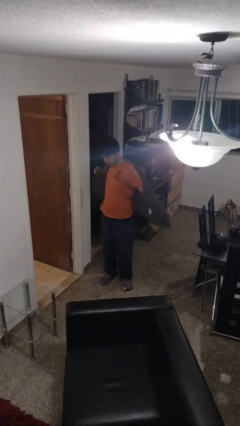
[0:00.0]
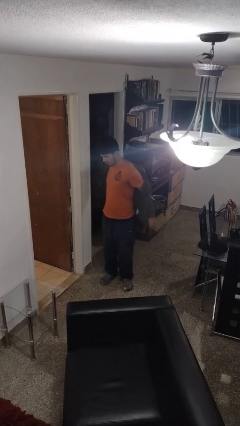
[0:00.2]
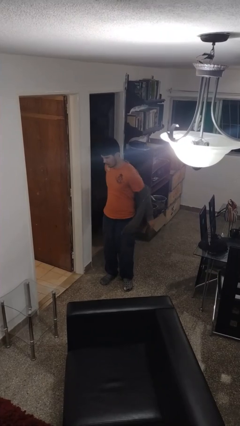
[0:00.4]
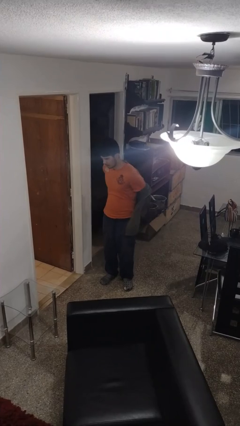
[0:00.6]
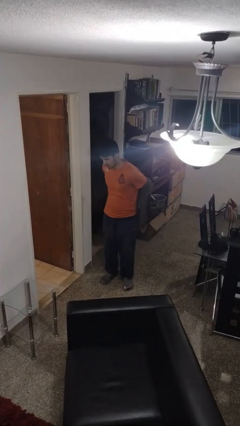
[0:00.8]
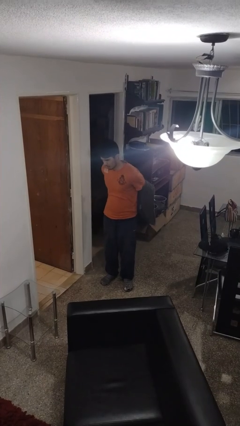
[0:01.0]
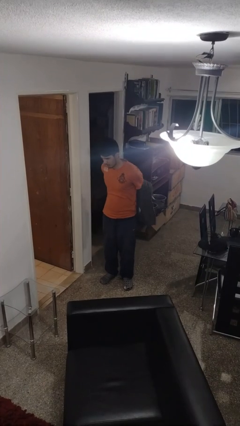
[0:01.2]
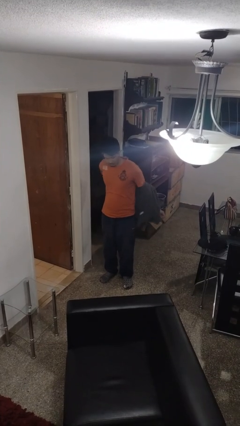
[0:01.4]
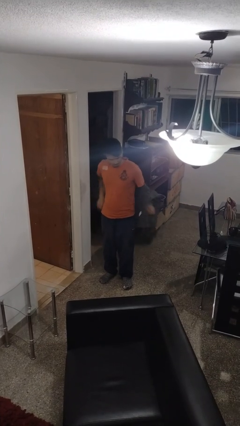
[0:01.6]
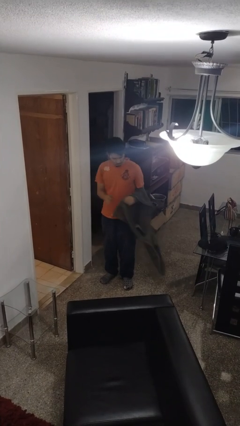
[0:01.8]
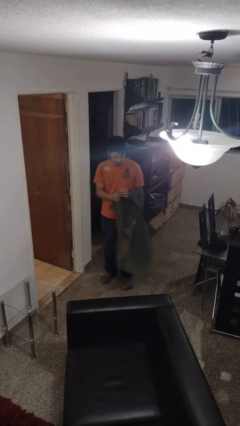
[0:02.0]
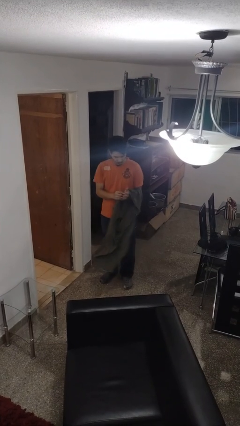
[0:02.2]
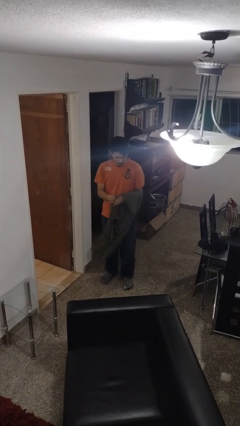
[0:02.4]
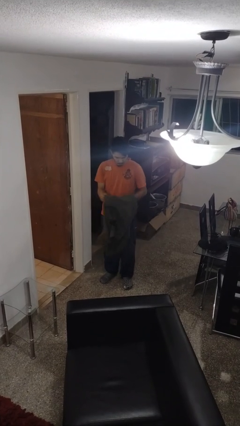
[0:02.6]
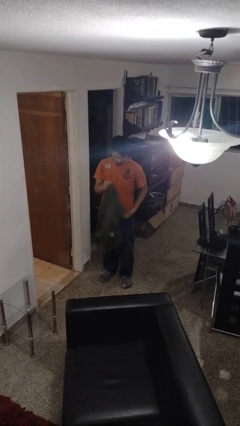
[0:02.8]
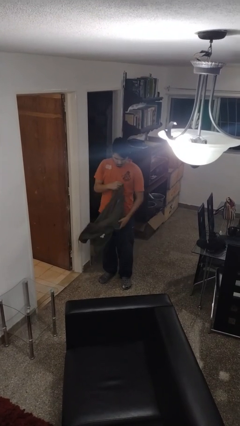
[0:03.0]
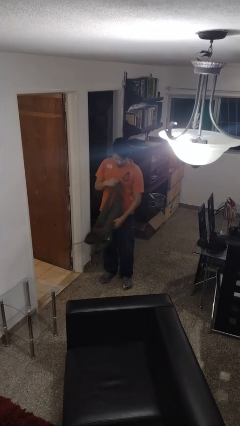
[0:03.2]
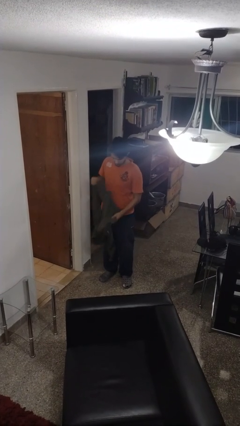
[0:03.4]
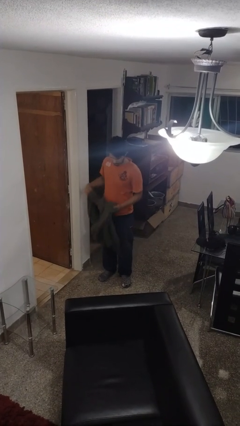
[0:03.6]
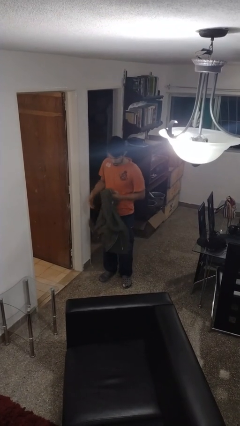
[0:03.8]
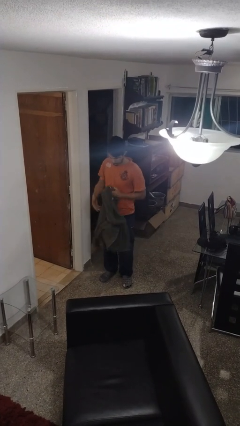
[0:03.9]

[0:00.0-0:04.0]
person takes off jacket

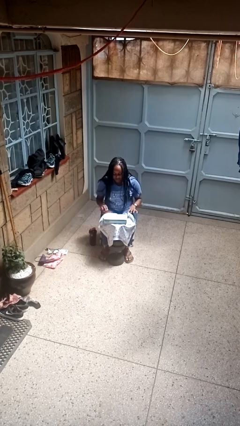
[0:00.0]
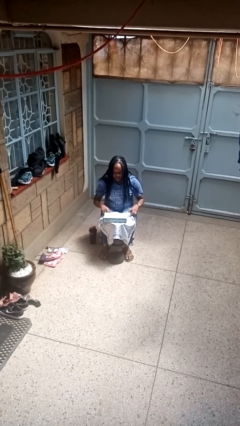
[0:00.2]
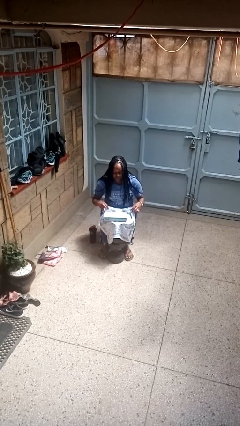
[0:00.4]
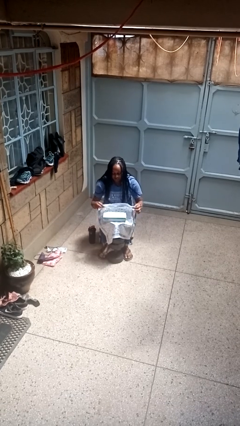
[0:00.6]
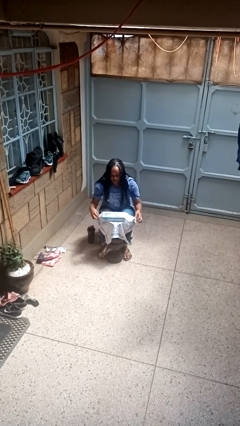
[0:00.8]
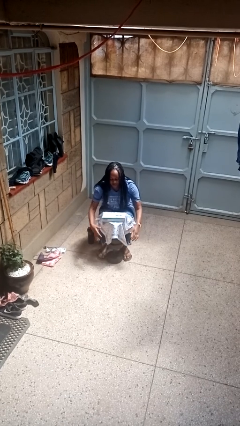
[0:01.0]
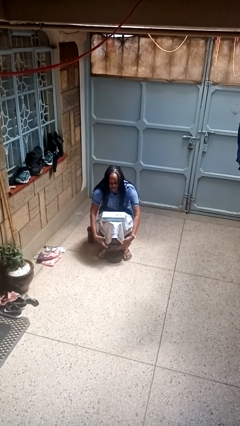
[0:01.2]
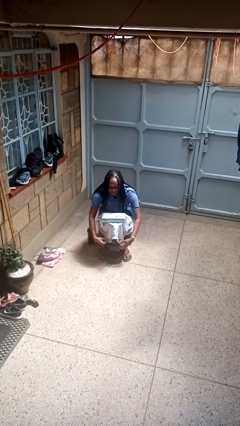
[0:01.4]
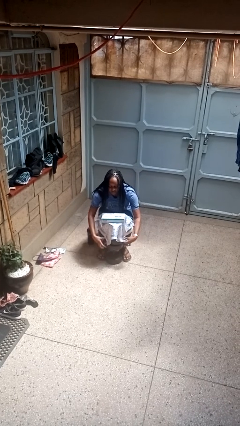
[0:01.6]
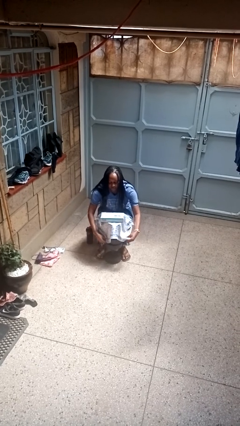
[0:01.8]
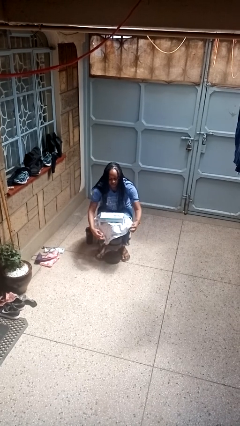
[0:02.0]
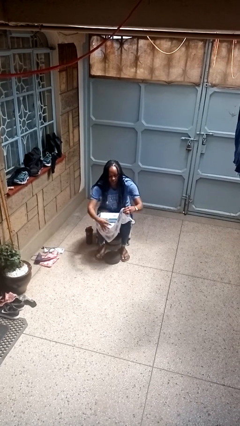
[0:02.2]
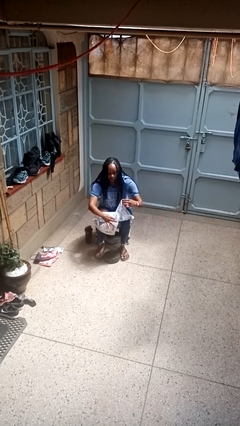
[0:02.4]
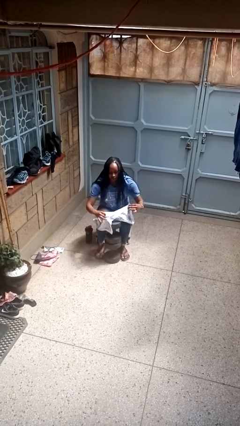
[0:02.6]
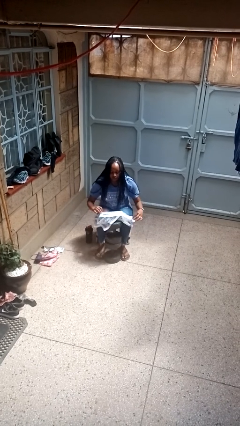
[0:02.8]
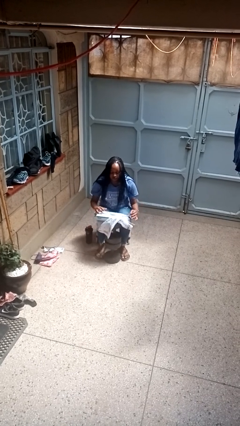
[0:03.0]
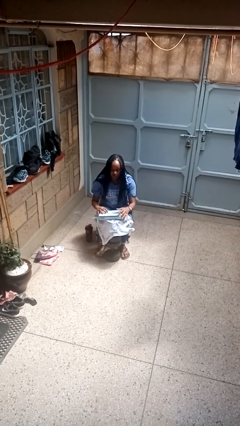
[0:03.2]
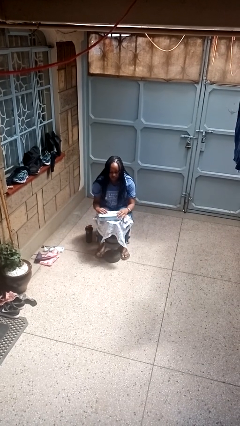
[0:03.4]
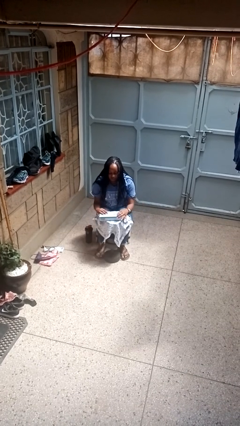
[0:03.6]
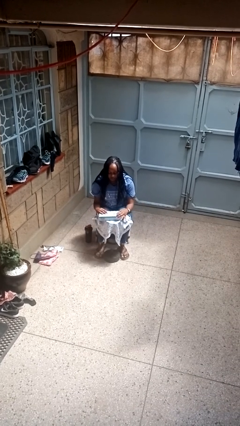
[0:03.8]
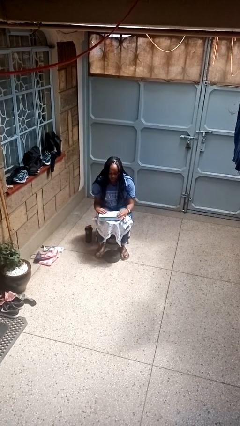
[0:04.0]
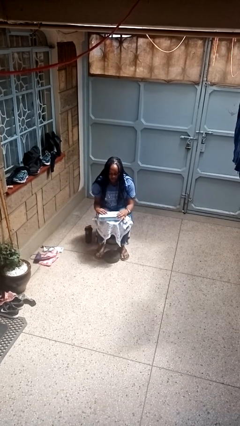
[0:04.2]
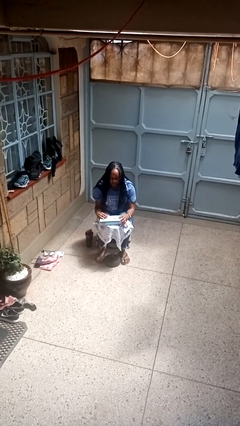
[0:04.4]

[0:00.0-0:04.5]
person wraps box

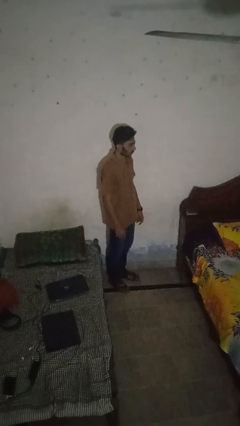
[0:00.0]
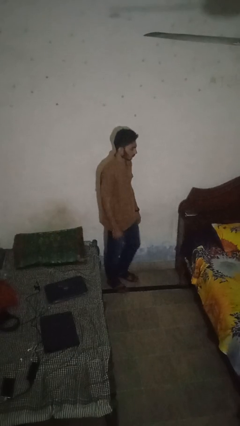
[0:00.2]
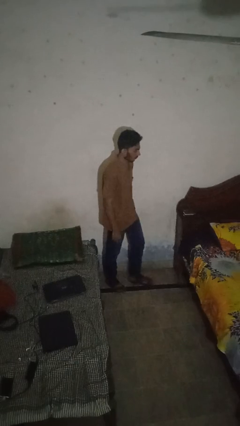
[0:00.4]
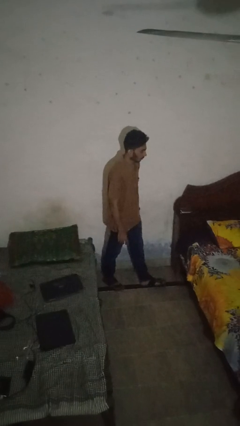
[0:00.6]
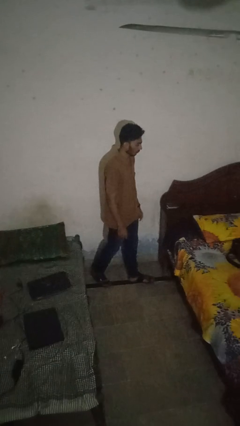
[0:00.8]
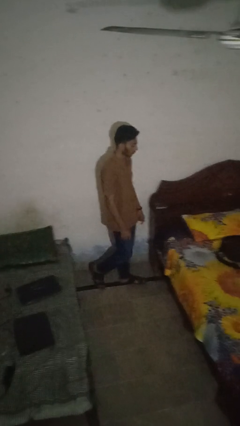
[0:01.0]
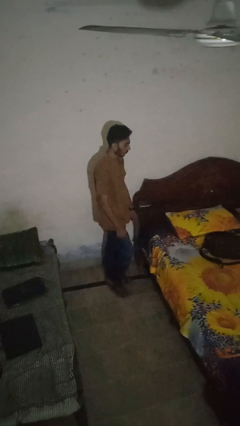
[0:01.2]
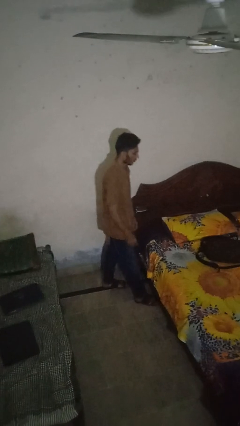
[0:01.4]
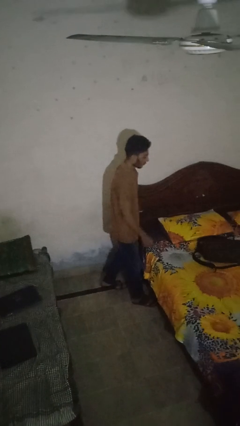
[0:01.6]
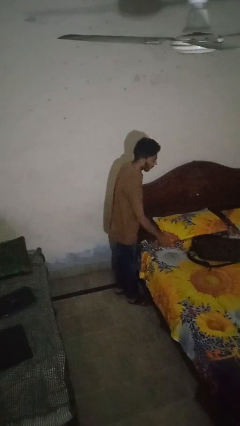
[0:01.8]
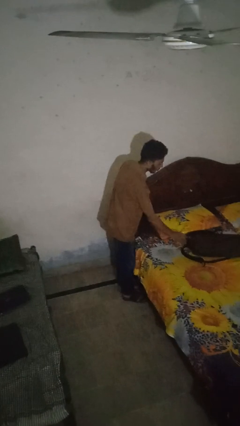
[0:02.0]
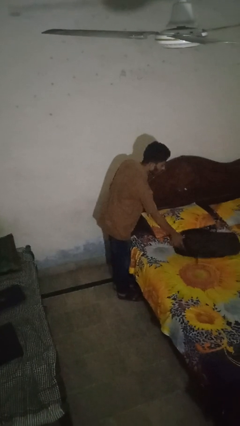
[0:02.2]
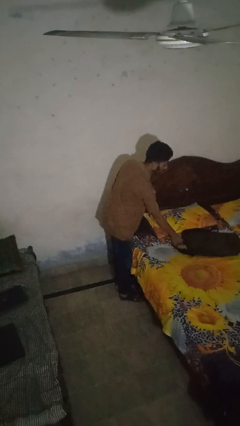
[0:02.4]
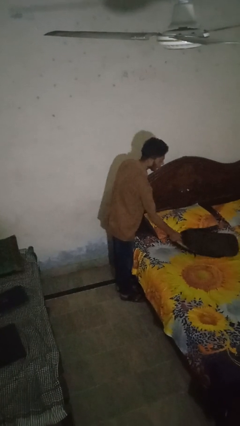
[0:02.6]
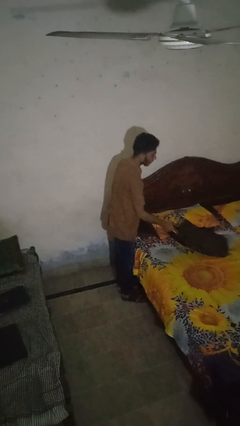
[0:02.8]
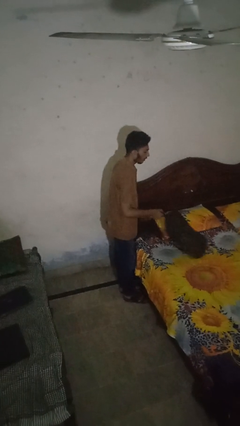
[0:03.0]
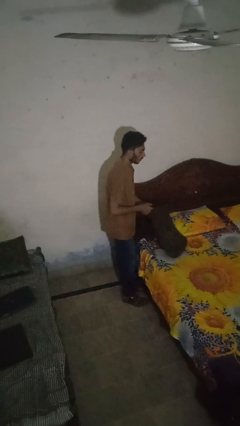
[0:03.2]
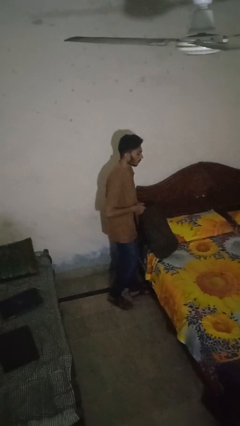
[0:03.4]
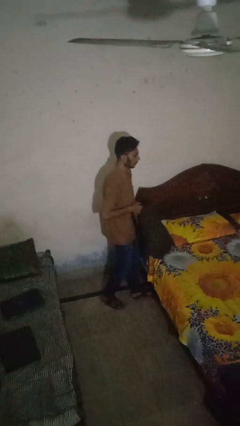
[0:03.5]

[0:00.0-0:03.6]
person picks up object from bed

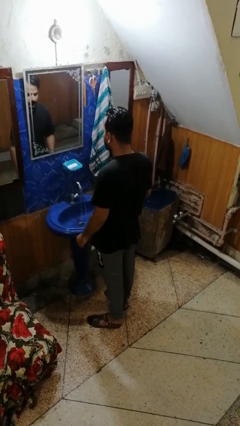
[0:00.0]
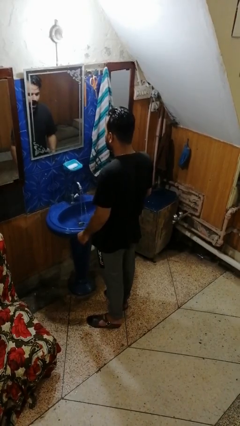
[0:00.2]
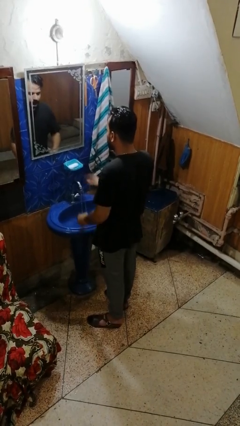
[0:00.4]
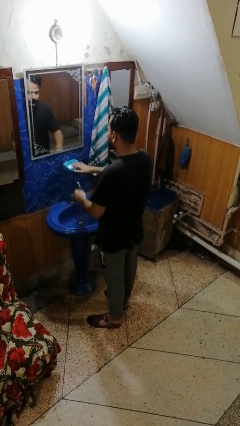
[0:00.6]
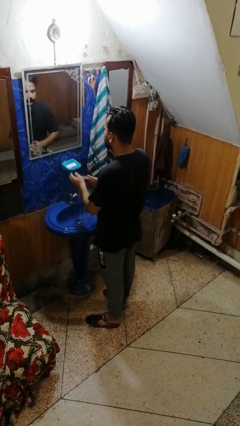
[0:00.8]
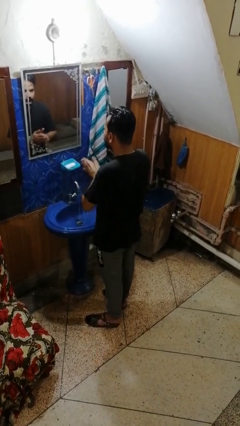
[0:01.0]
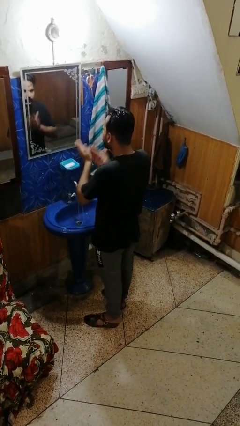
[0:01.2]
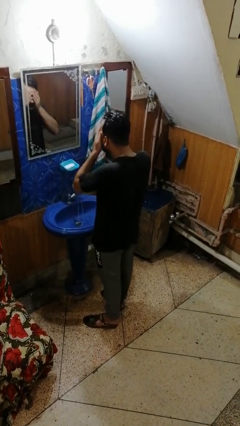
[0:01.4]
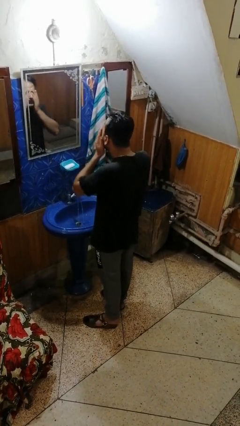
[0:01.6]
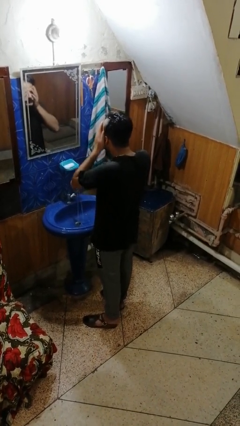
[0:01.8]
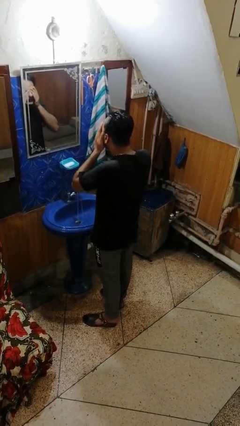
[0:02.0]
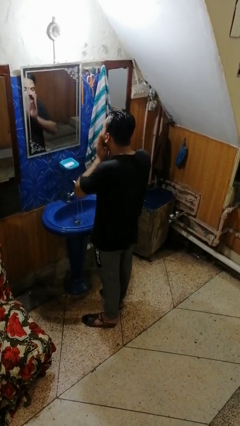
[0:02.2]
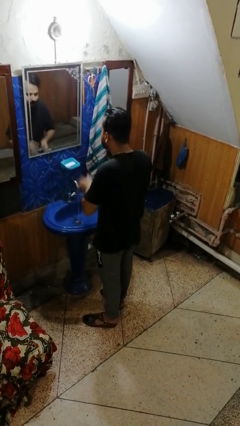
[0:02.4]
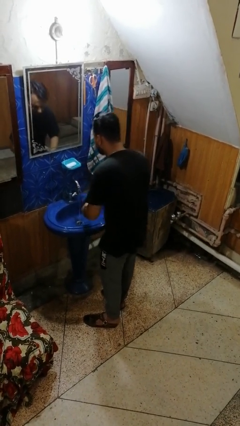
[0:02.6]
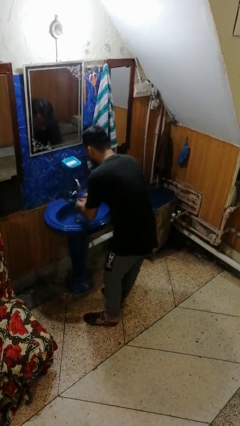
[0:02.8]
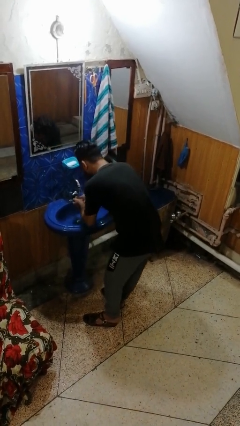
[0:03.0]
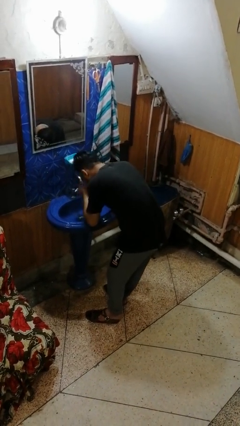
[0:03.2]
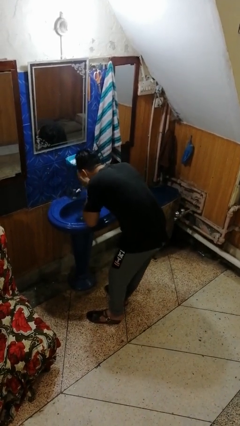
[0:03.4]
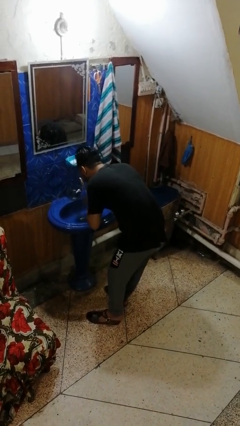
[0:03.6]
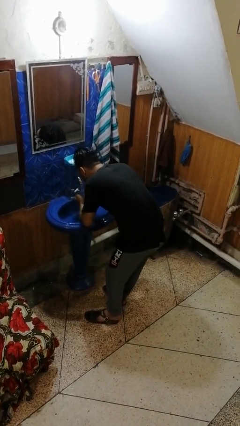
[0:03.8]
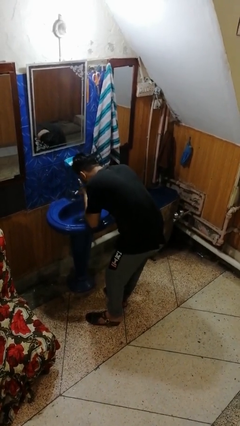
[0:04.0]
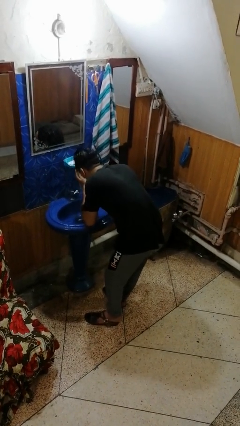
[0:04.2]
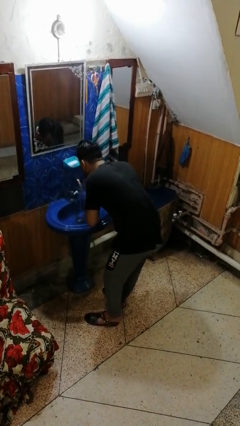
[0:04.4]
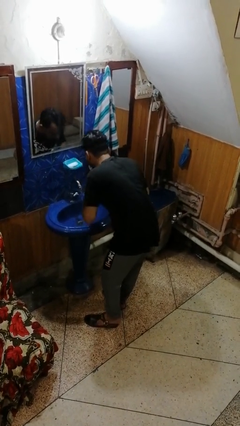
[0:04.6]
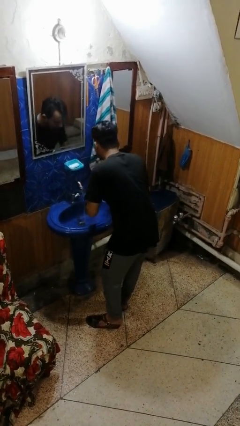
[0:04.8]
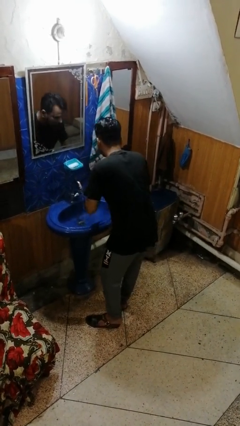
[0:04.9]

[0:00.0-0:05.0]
person washes face

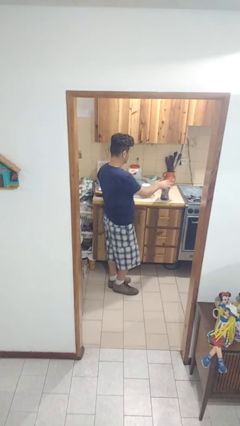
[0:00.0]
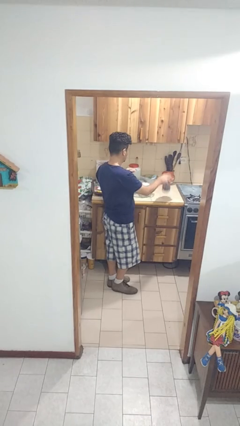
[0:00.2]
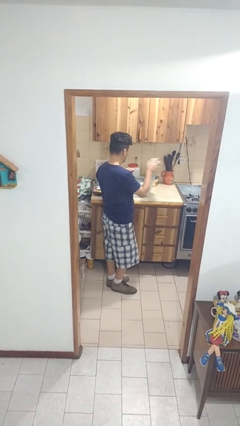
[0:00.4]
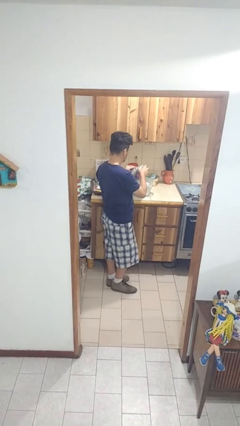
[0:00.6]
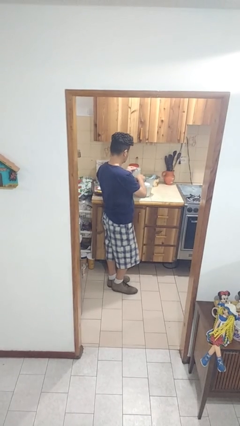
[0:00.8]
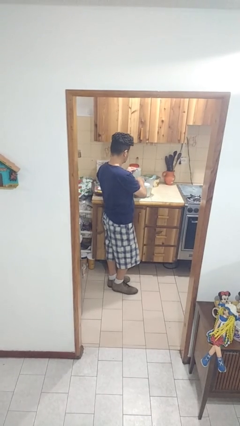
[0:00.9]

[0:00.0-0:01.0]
person puts object into bag
